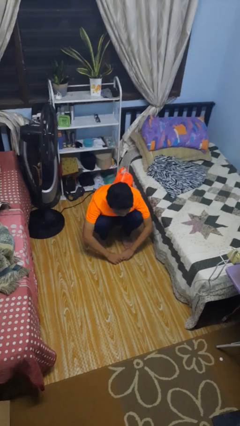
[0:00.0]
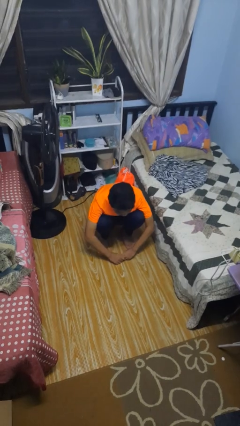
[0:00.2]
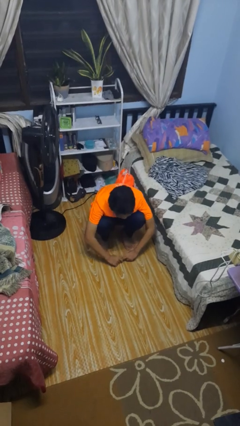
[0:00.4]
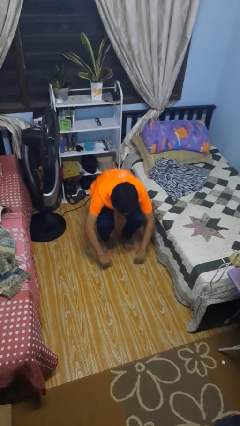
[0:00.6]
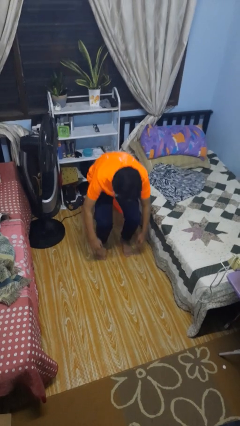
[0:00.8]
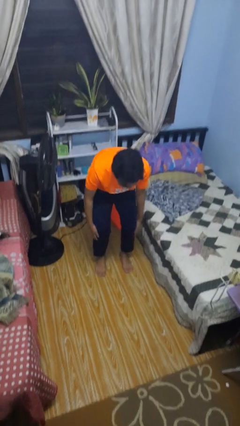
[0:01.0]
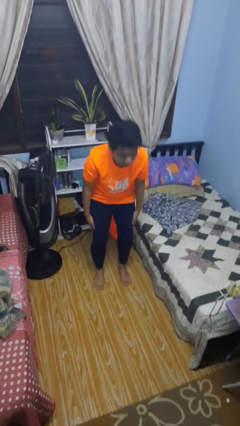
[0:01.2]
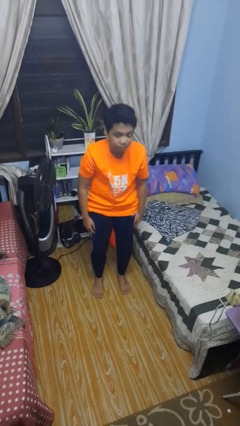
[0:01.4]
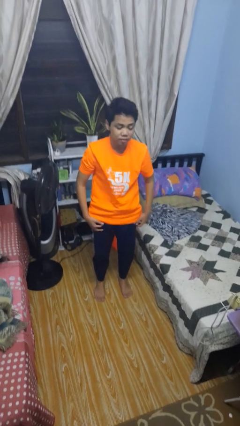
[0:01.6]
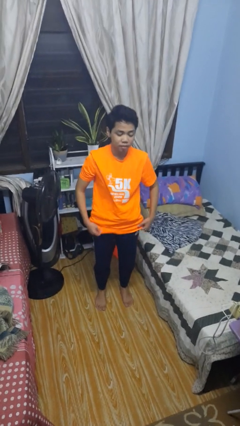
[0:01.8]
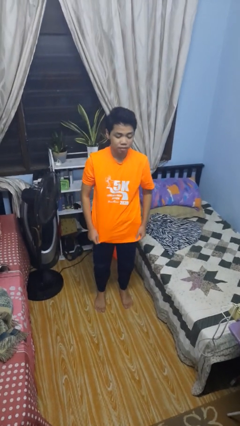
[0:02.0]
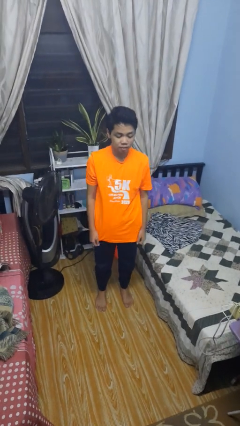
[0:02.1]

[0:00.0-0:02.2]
person stands up

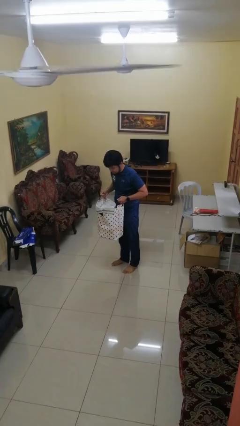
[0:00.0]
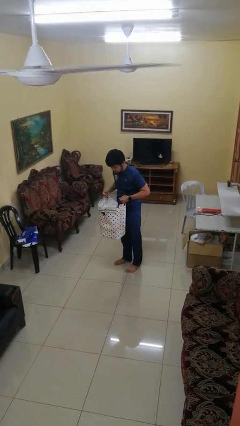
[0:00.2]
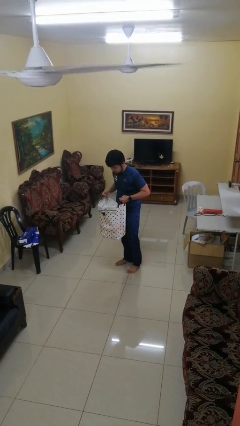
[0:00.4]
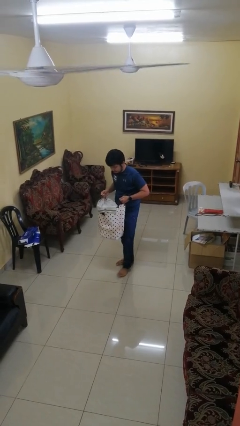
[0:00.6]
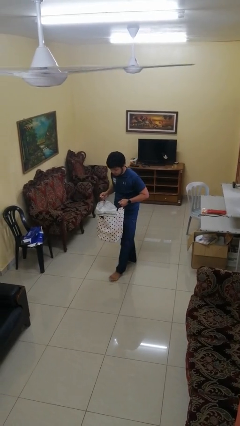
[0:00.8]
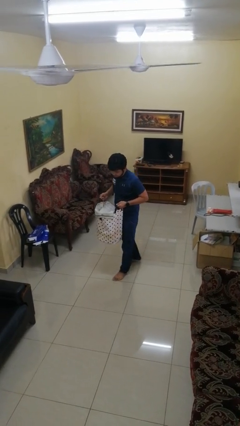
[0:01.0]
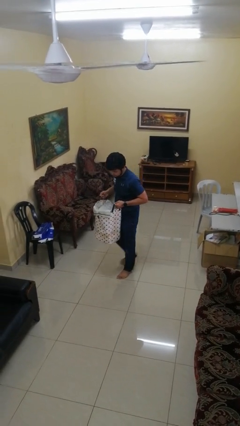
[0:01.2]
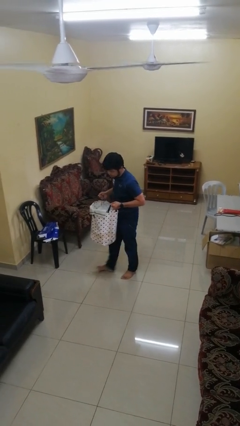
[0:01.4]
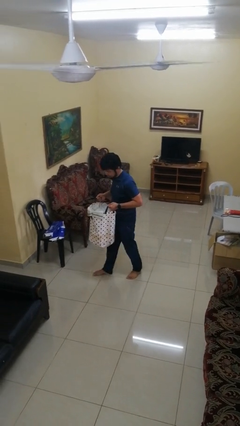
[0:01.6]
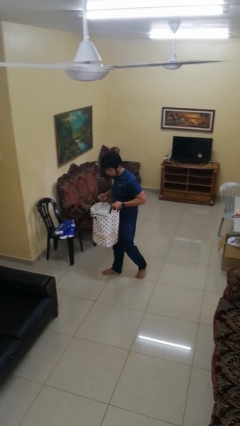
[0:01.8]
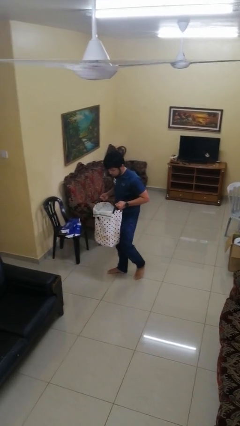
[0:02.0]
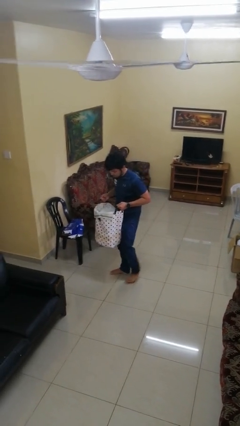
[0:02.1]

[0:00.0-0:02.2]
person carries laundry basket

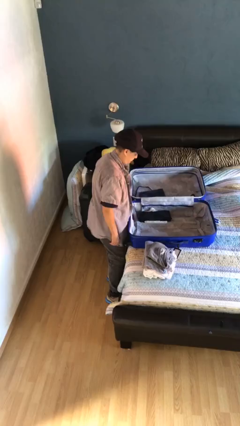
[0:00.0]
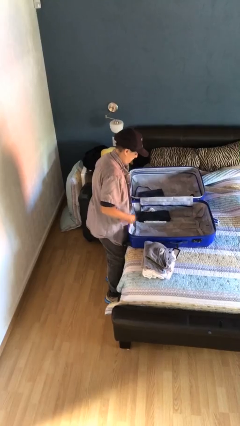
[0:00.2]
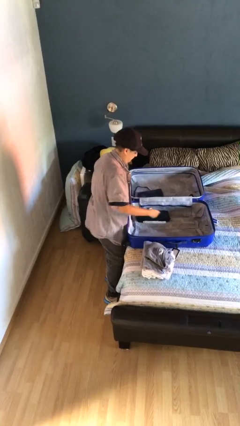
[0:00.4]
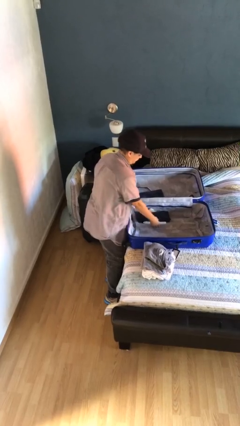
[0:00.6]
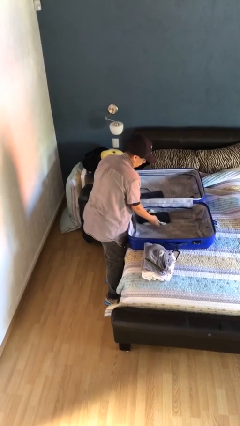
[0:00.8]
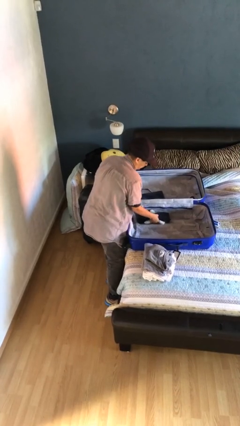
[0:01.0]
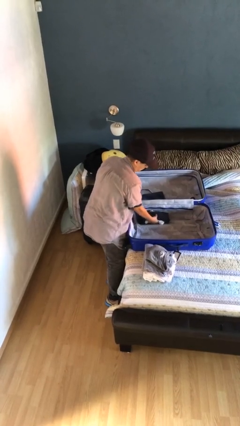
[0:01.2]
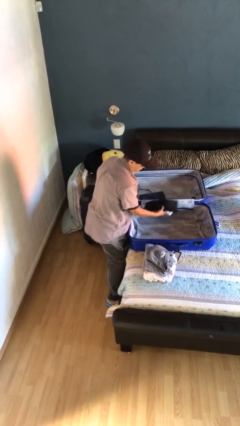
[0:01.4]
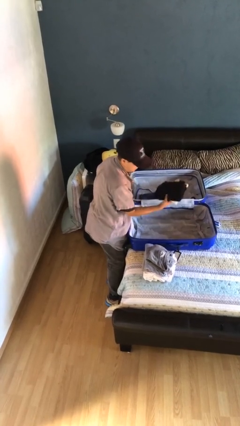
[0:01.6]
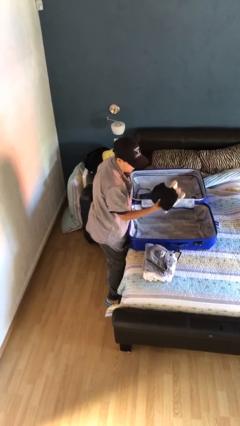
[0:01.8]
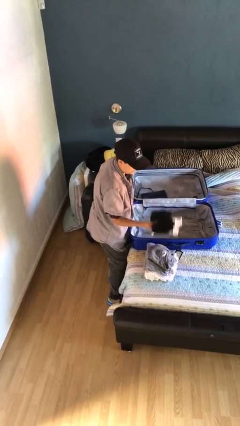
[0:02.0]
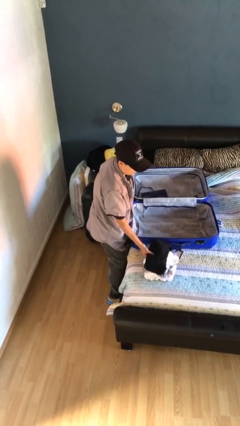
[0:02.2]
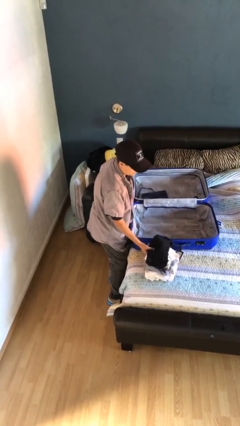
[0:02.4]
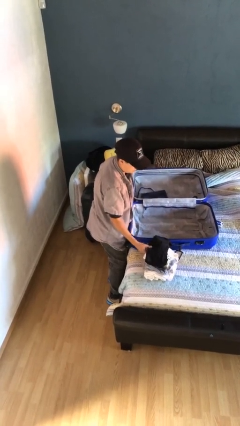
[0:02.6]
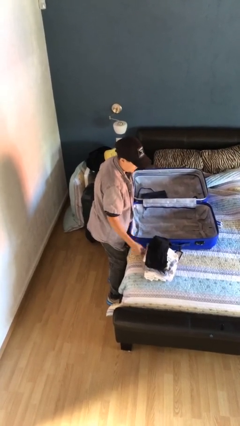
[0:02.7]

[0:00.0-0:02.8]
person unloads clothes from suitcase

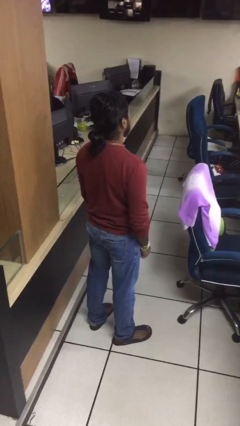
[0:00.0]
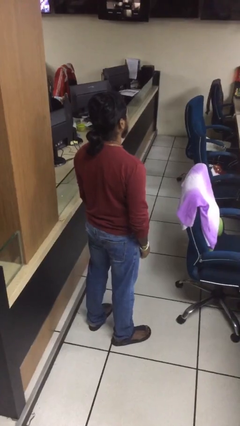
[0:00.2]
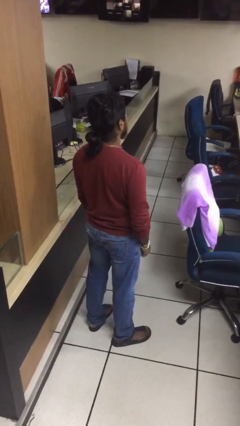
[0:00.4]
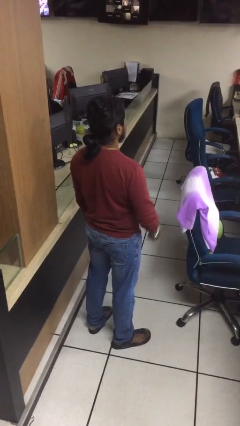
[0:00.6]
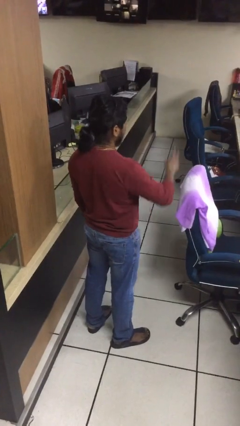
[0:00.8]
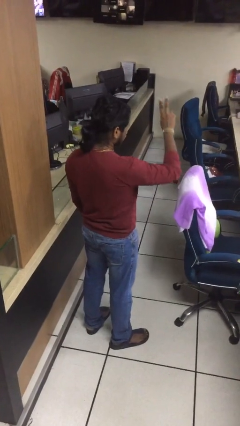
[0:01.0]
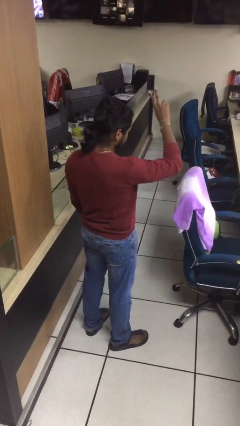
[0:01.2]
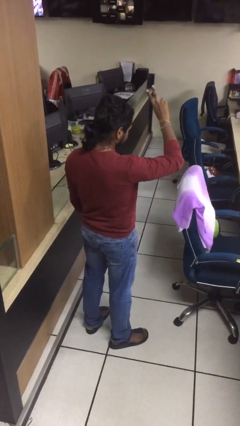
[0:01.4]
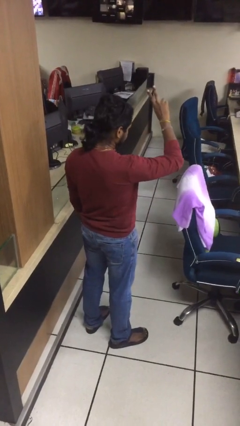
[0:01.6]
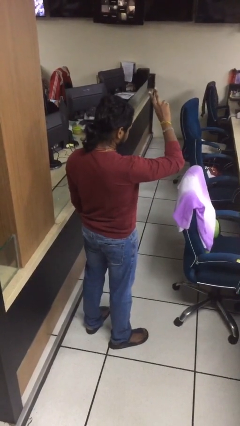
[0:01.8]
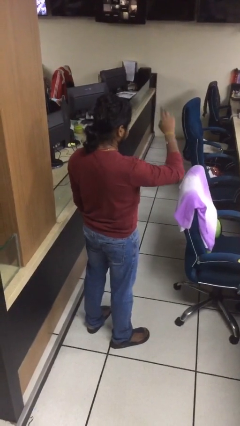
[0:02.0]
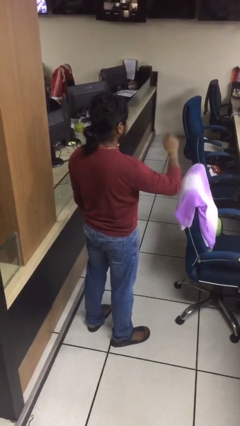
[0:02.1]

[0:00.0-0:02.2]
person gestures peace

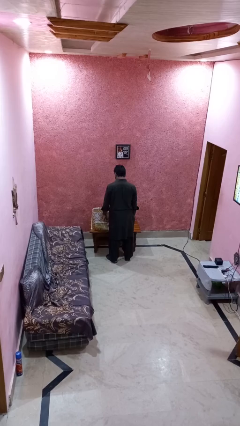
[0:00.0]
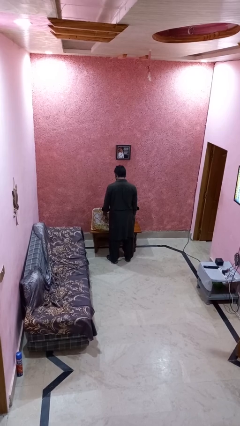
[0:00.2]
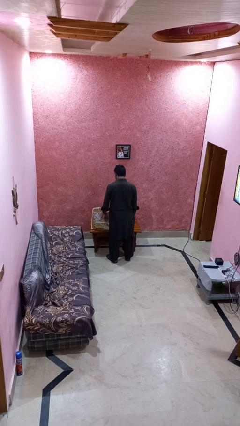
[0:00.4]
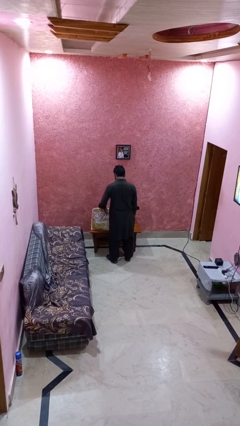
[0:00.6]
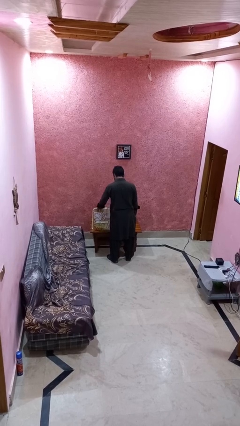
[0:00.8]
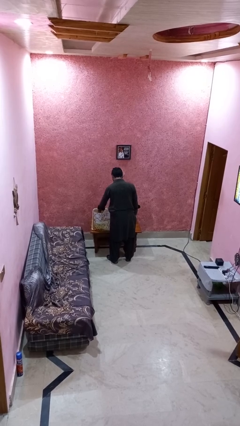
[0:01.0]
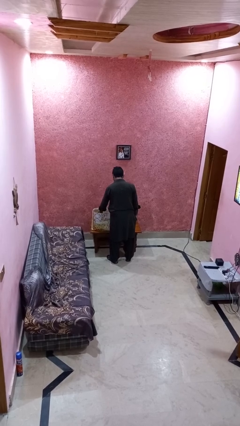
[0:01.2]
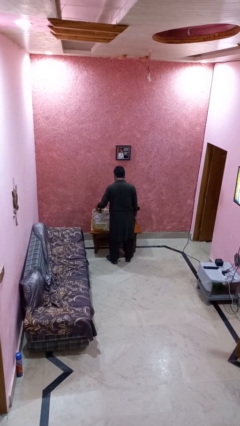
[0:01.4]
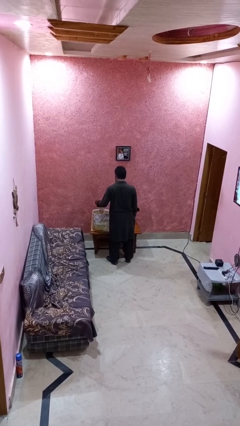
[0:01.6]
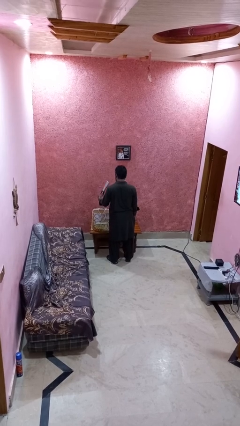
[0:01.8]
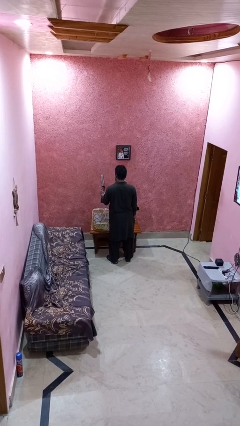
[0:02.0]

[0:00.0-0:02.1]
person takes object from bag

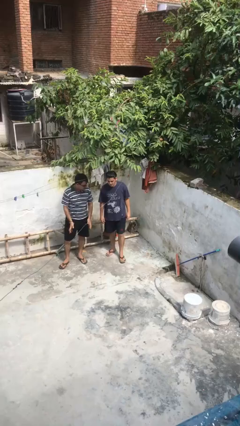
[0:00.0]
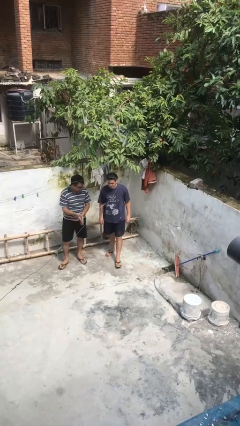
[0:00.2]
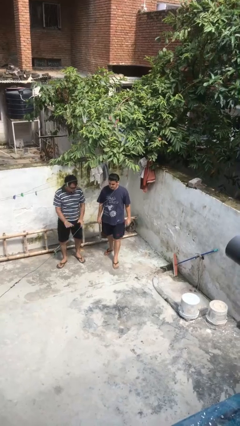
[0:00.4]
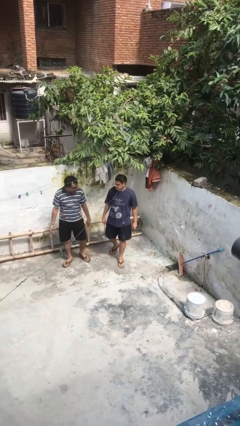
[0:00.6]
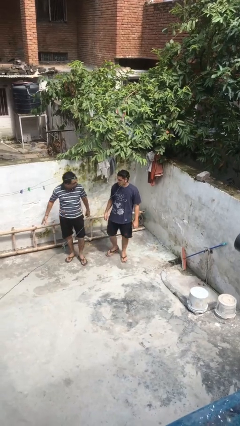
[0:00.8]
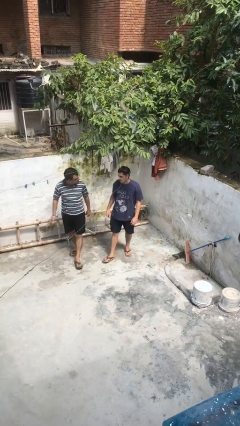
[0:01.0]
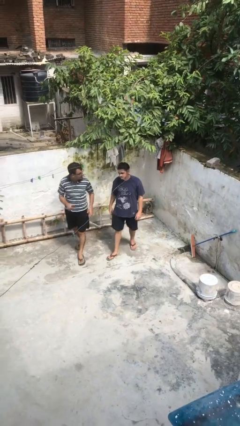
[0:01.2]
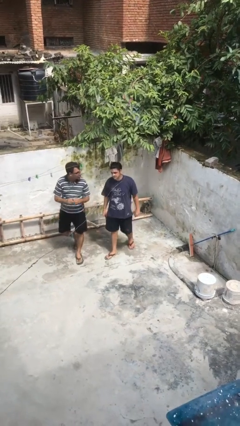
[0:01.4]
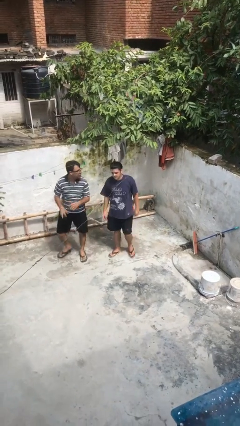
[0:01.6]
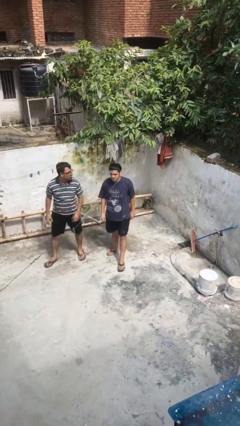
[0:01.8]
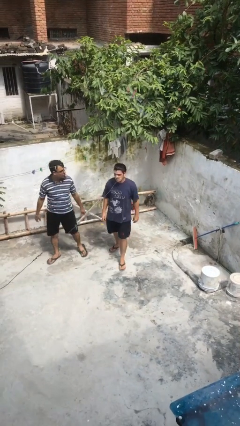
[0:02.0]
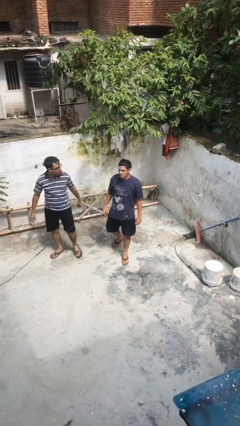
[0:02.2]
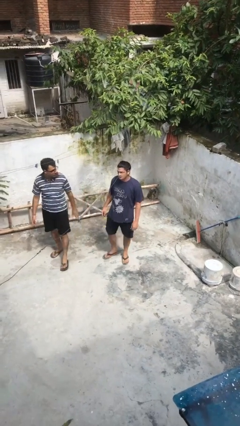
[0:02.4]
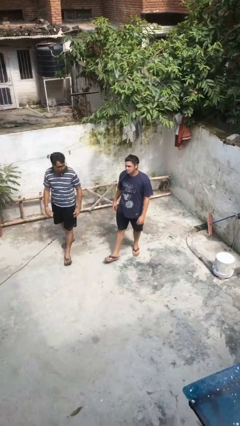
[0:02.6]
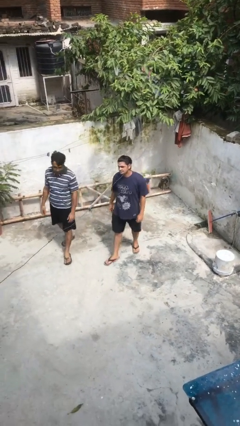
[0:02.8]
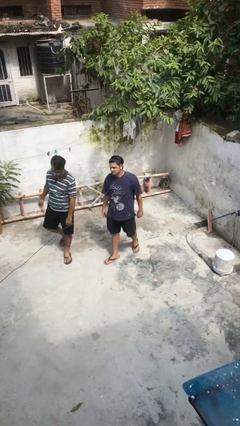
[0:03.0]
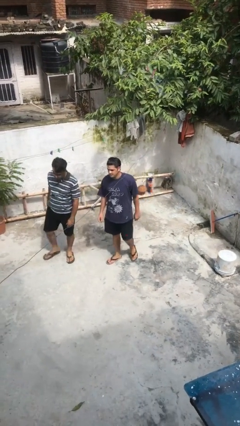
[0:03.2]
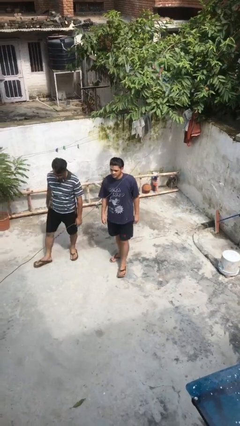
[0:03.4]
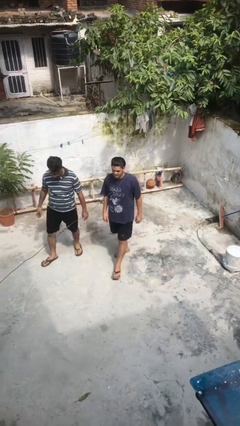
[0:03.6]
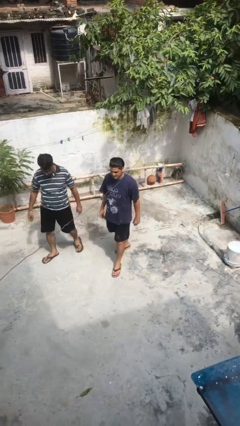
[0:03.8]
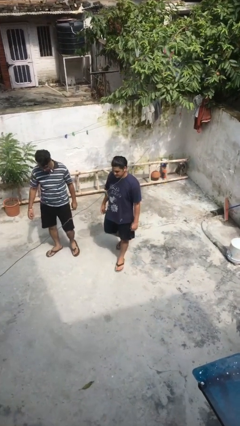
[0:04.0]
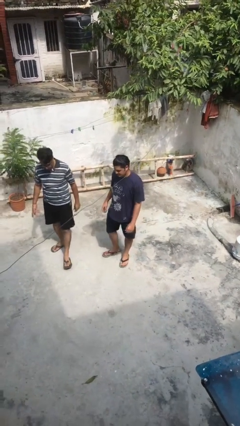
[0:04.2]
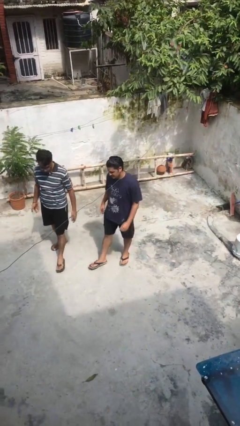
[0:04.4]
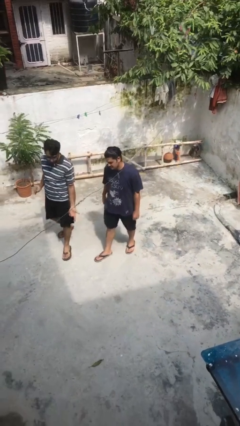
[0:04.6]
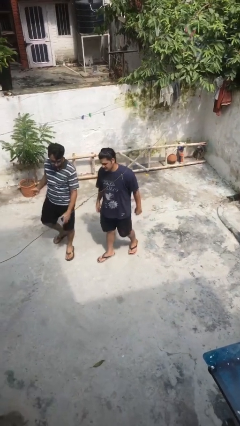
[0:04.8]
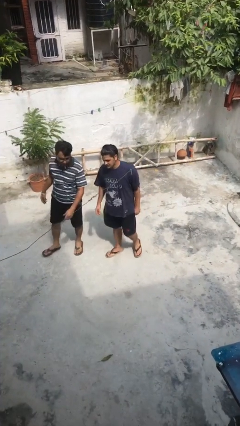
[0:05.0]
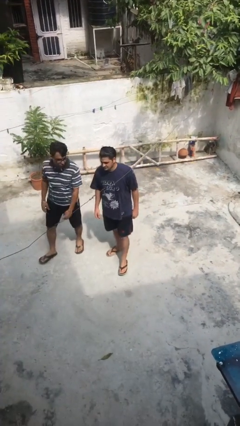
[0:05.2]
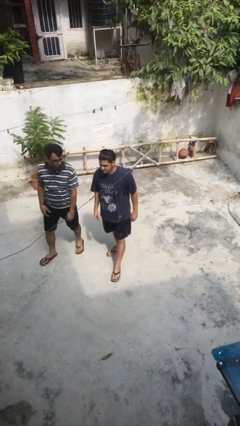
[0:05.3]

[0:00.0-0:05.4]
person talks to person
